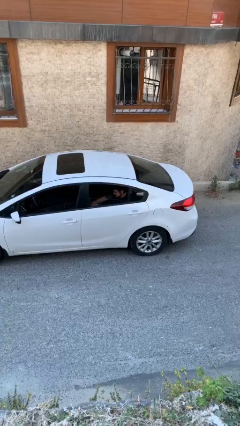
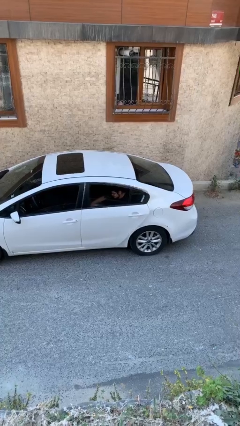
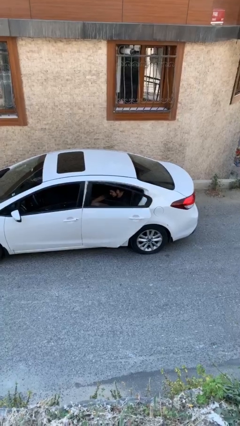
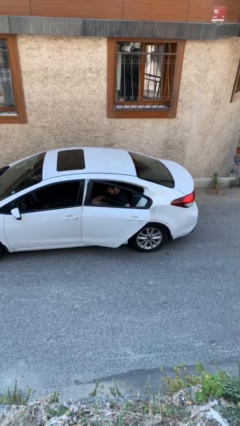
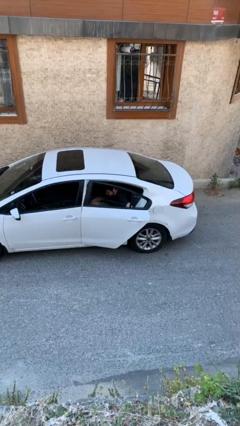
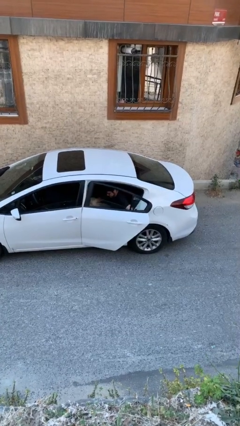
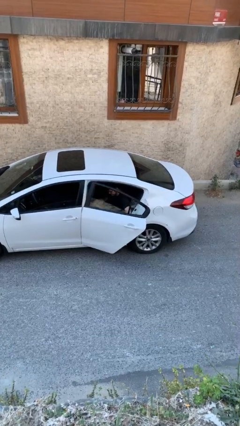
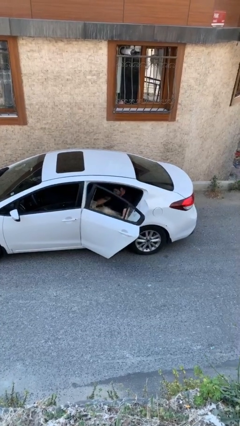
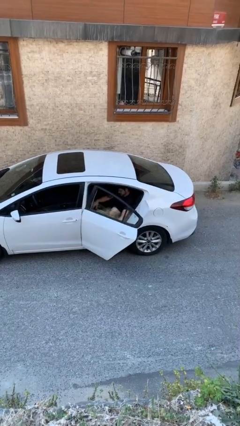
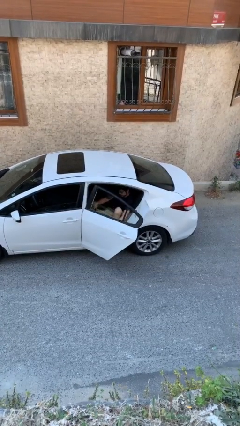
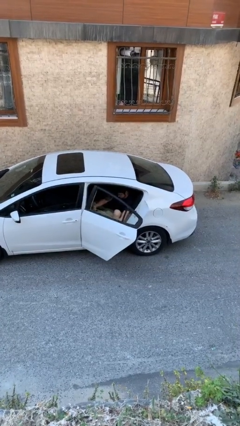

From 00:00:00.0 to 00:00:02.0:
person opens car door

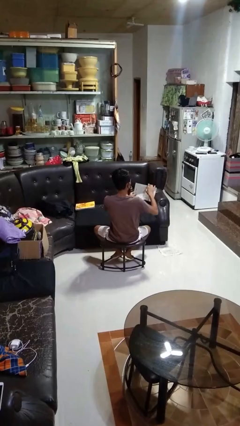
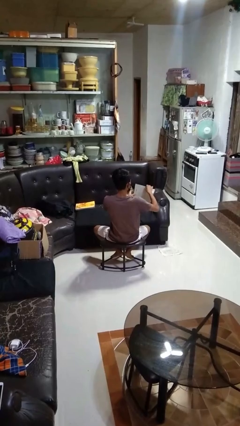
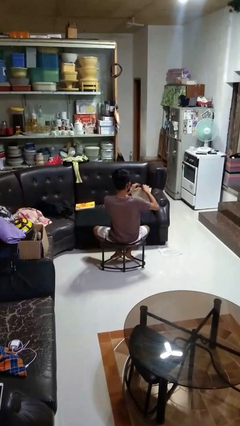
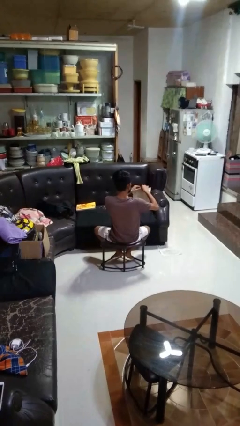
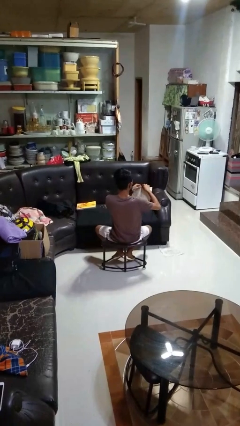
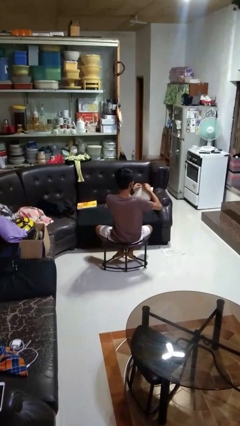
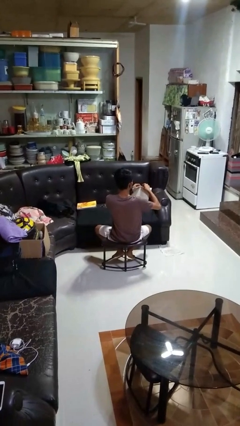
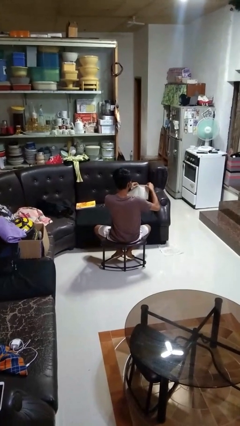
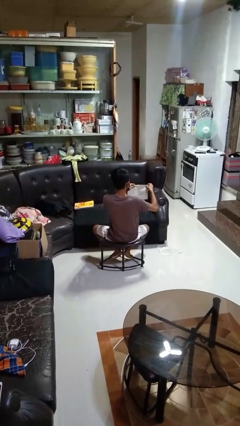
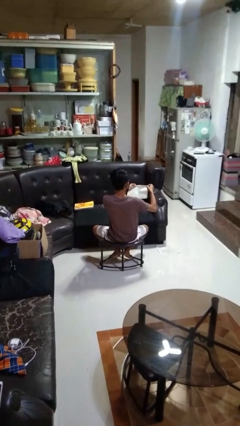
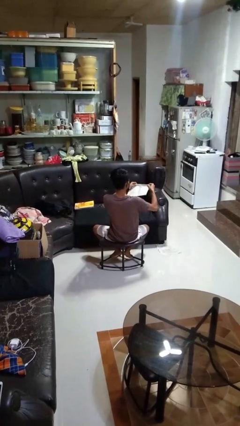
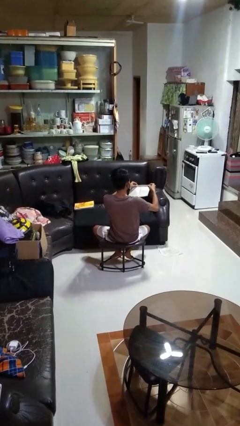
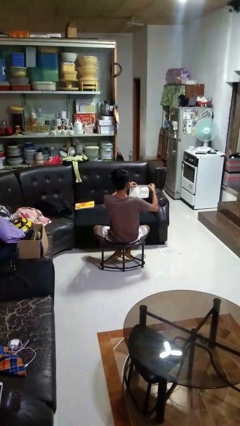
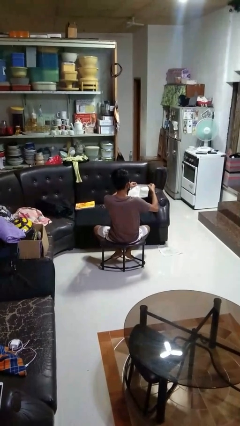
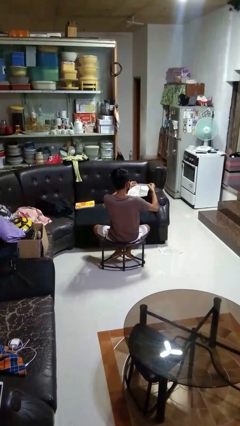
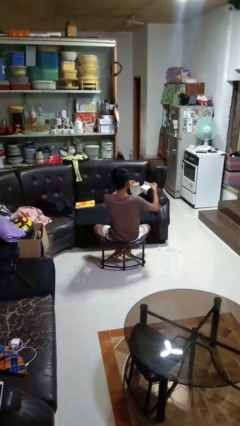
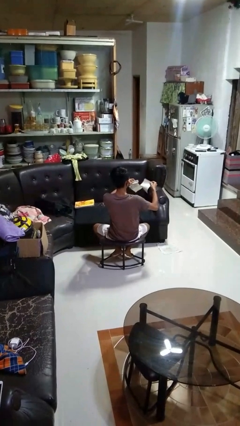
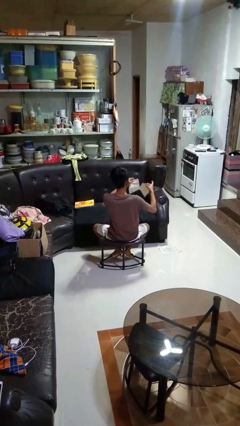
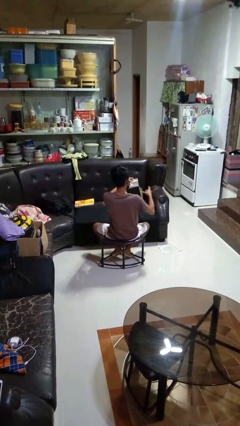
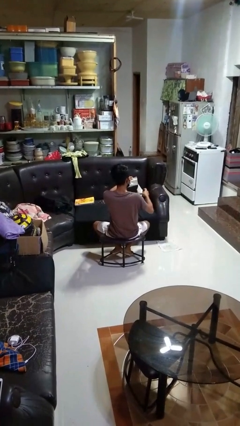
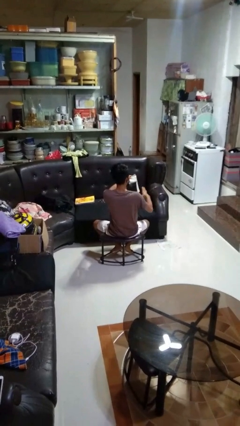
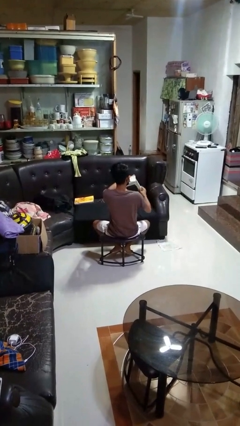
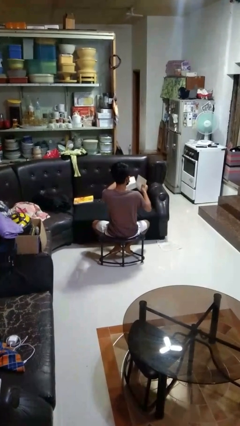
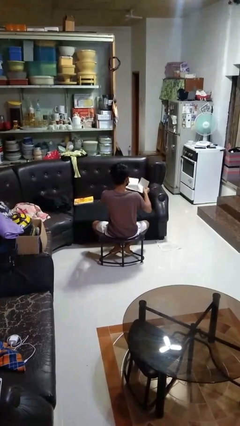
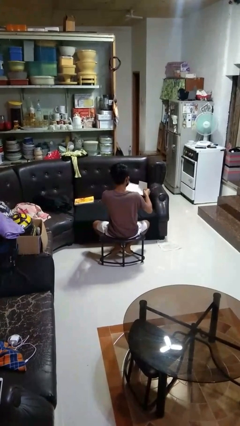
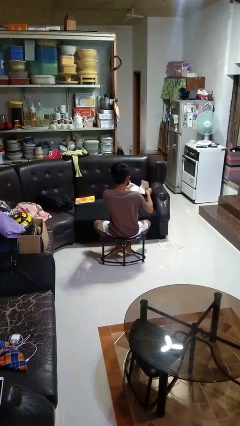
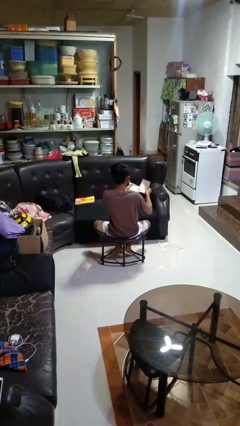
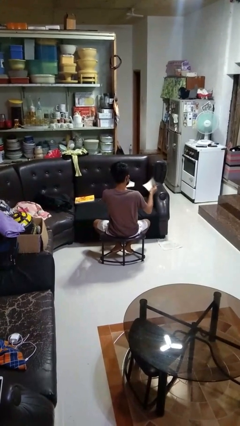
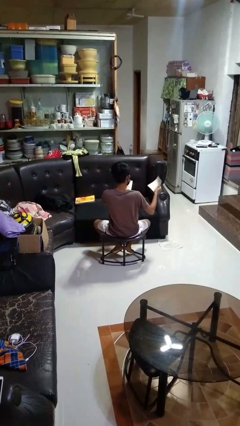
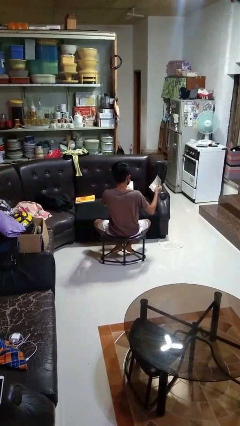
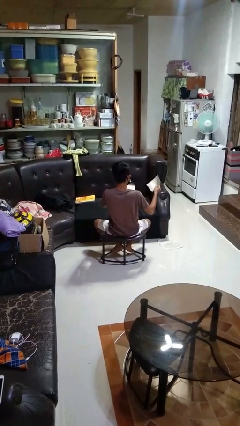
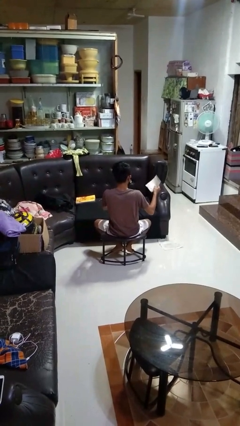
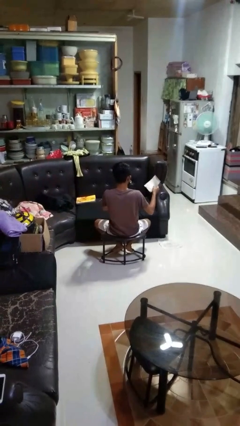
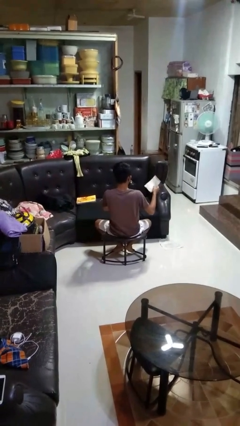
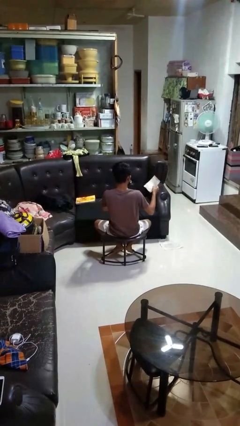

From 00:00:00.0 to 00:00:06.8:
person tears paper

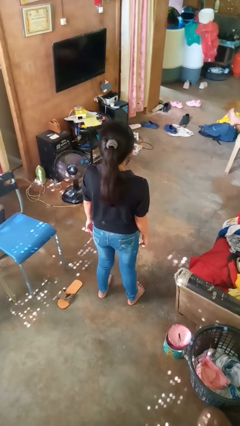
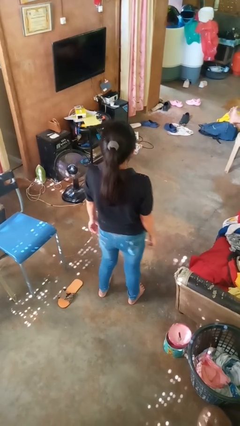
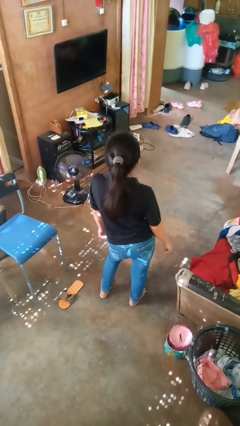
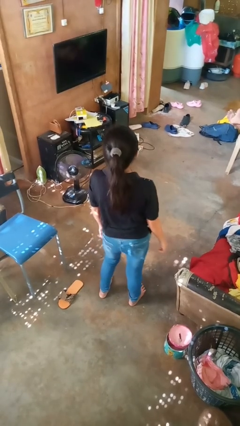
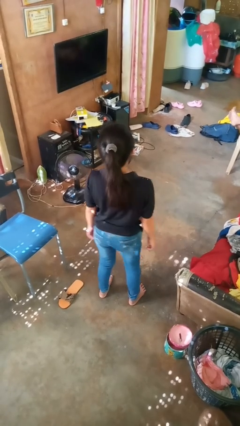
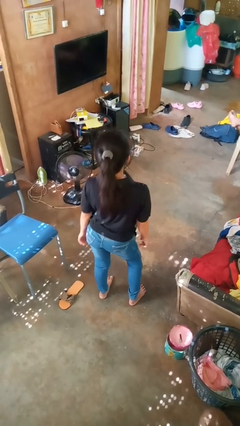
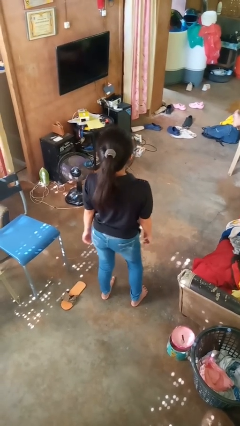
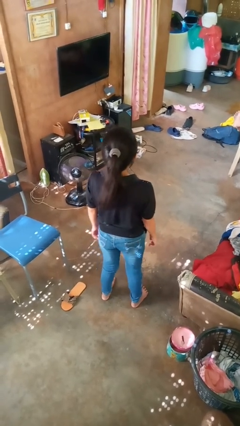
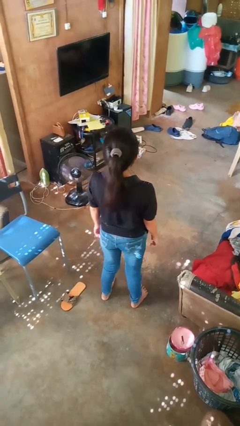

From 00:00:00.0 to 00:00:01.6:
person wiggles hips

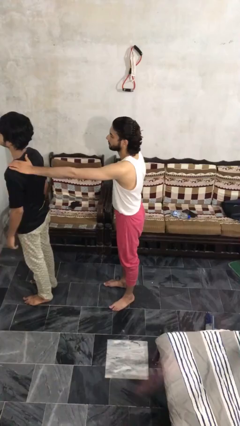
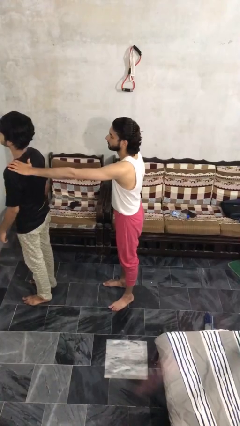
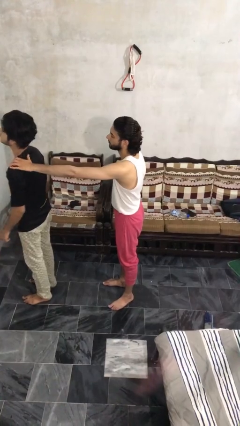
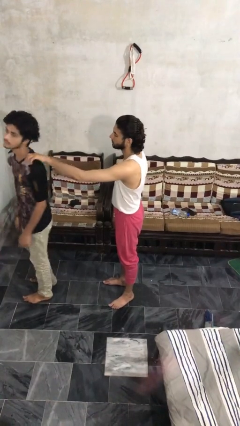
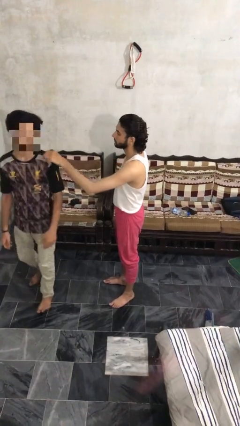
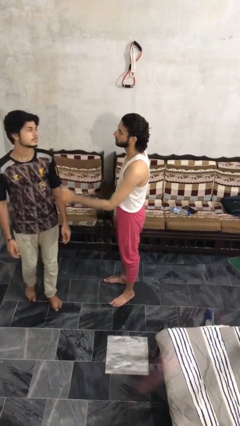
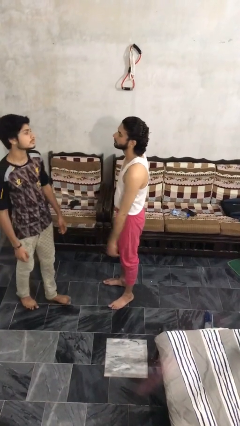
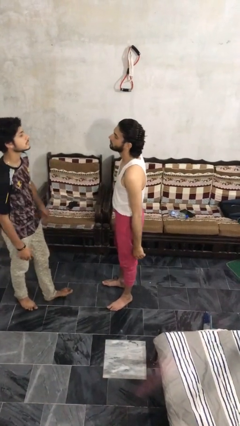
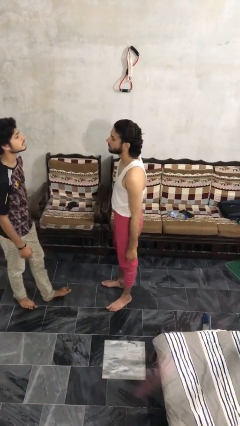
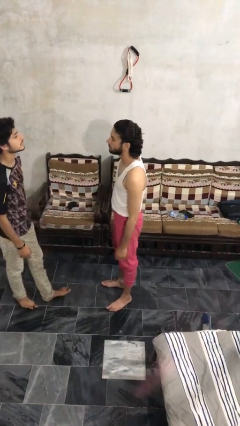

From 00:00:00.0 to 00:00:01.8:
person spins person around

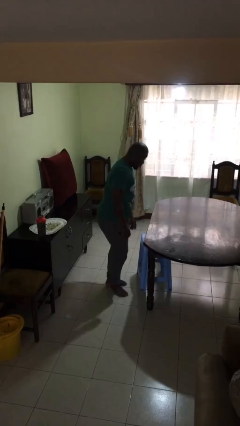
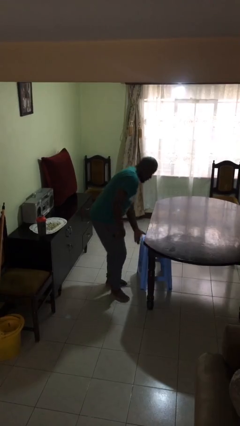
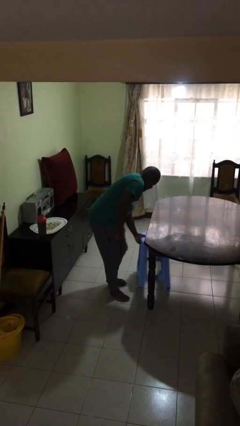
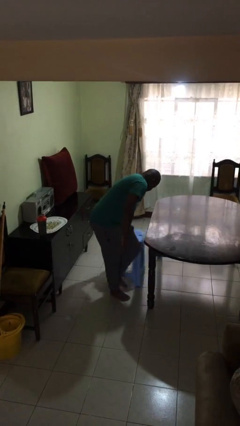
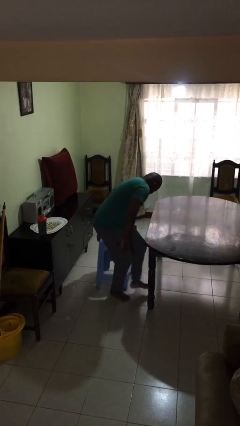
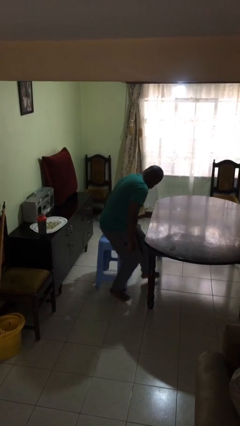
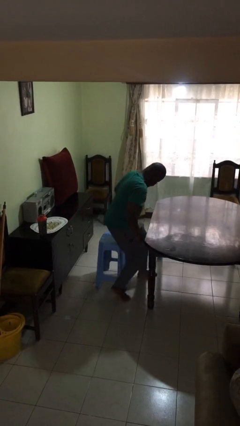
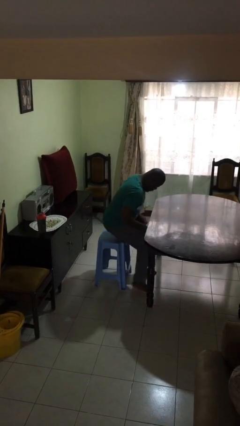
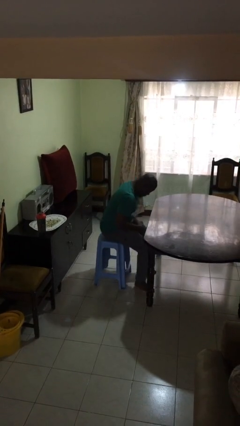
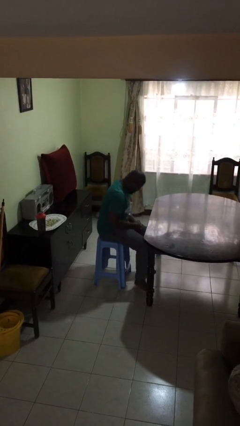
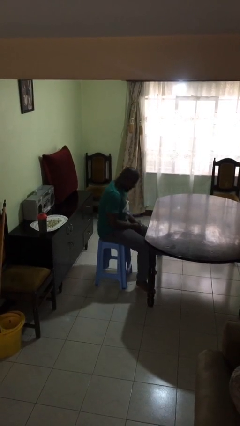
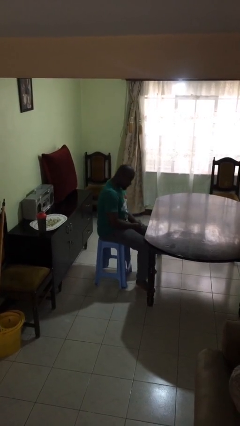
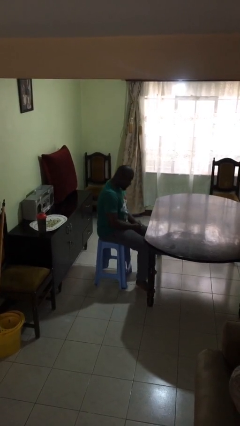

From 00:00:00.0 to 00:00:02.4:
person sits down

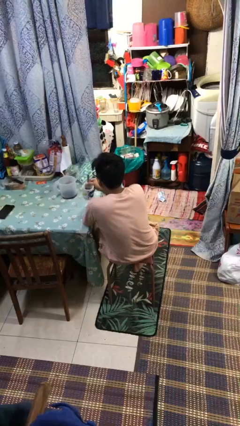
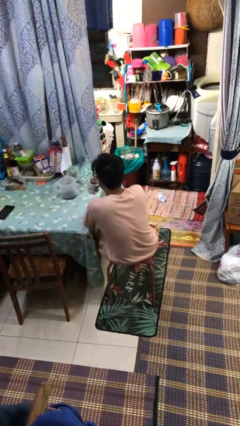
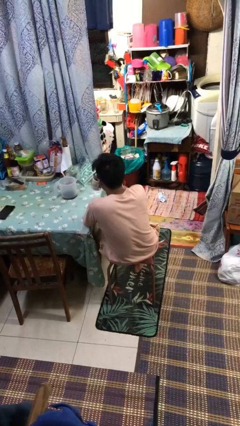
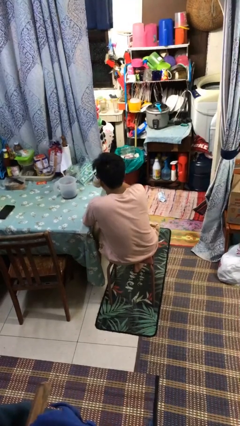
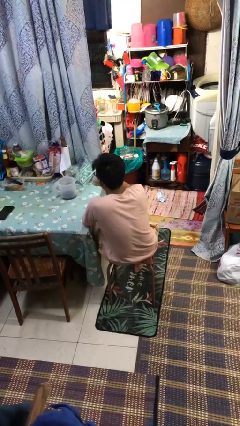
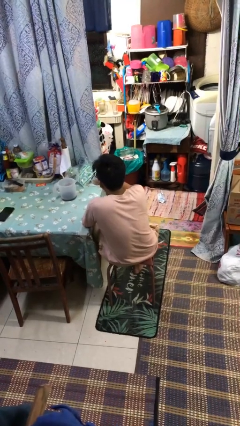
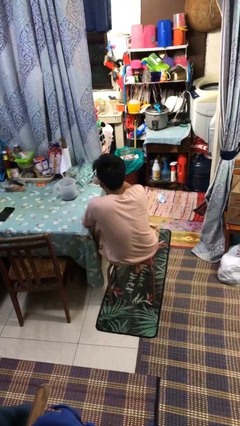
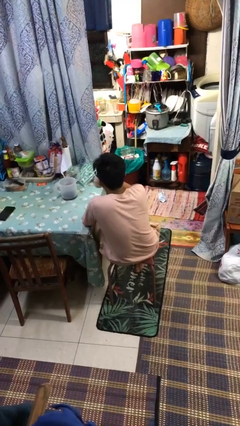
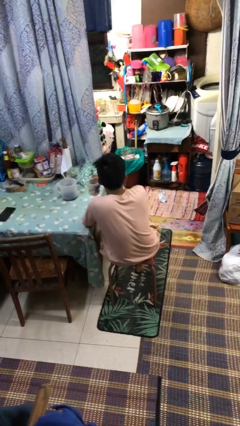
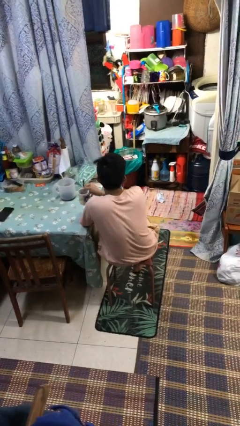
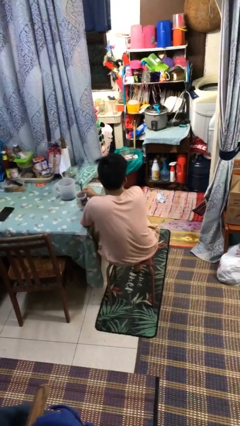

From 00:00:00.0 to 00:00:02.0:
person drinks from mug

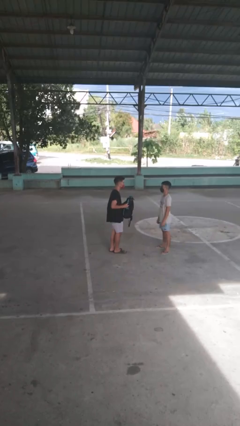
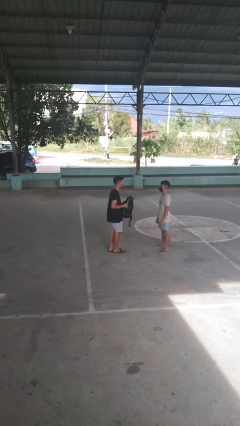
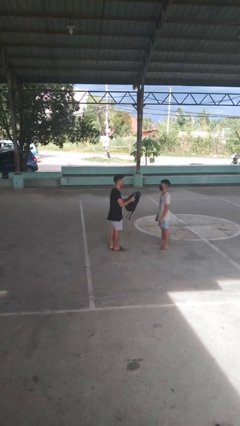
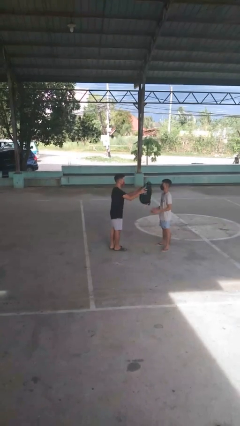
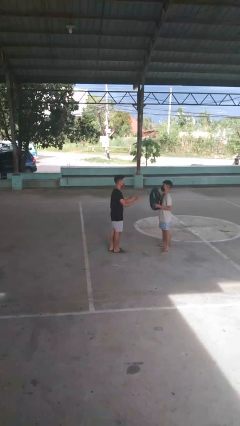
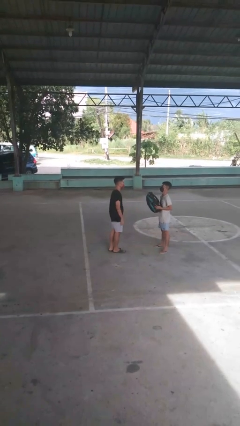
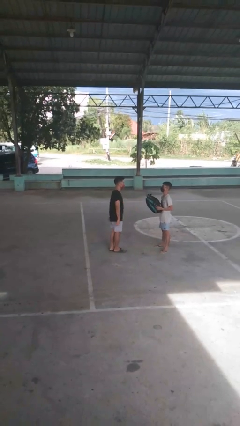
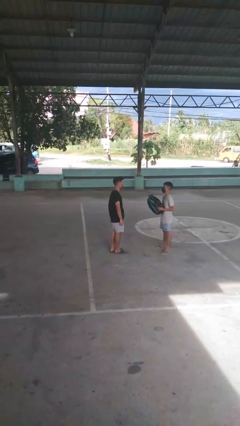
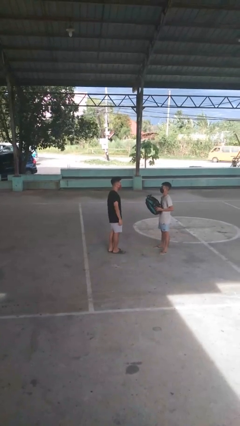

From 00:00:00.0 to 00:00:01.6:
person throws object to person
